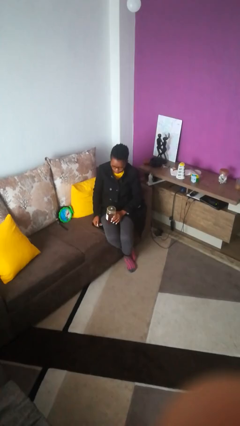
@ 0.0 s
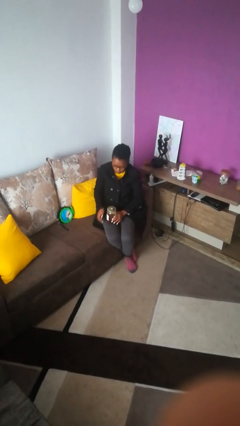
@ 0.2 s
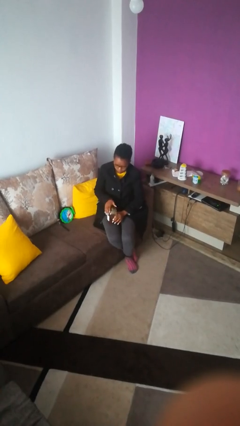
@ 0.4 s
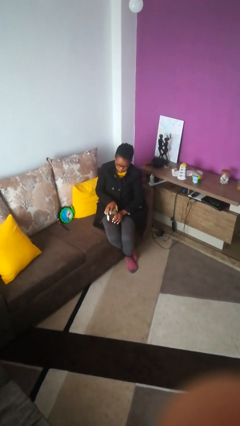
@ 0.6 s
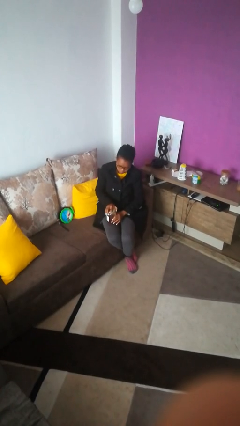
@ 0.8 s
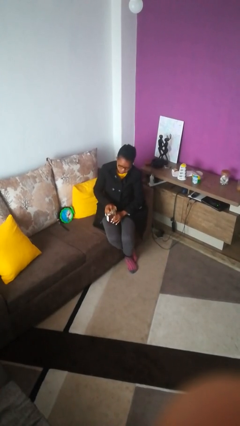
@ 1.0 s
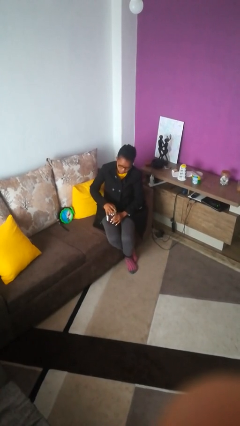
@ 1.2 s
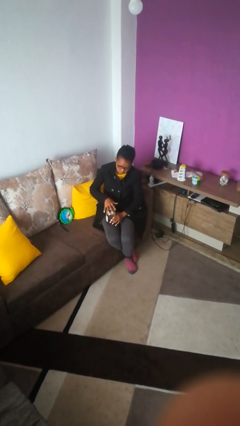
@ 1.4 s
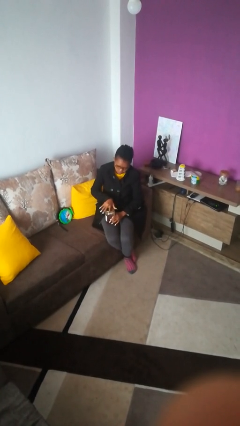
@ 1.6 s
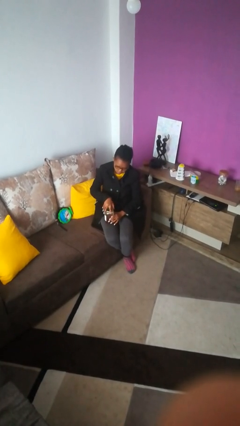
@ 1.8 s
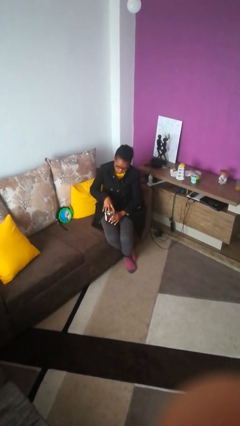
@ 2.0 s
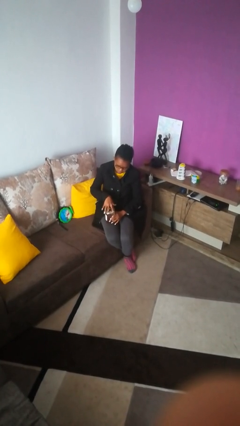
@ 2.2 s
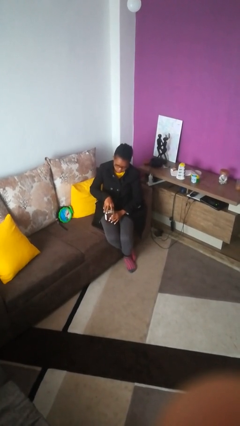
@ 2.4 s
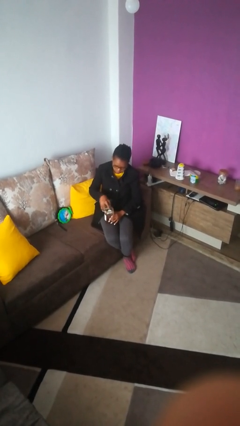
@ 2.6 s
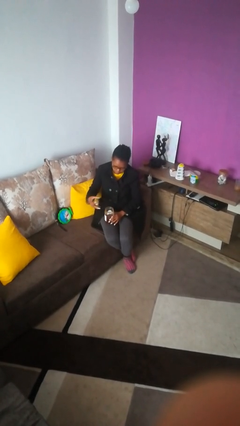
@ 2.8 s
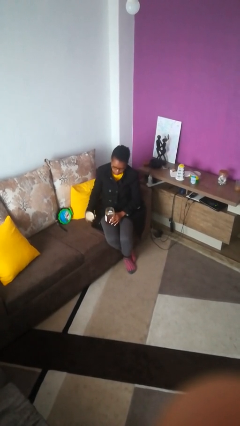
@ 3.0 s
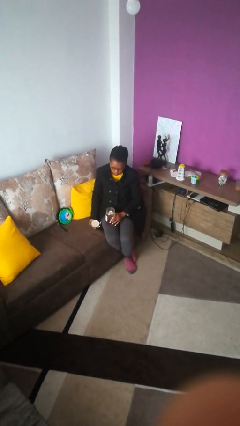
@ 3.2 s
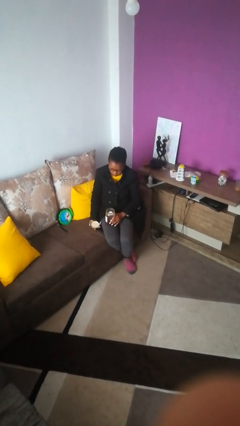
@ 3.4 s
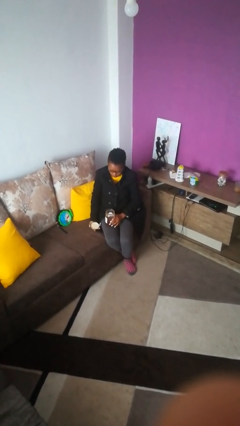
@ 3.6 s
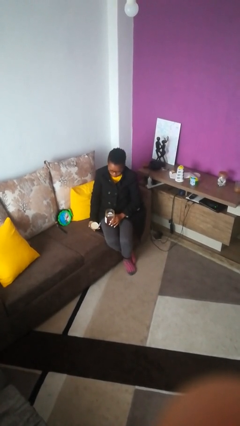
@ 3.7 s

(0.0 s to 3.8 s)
person opens jar

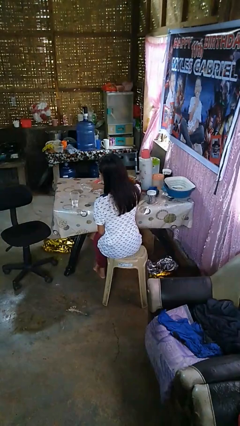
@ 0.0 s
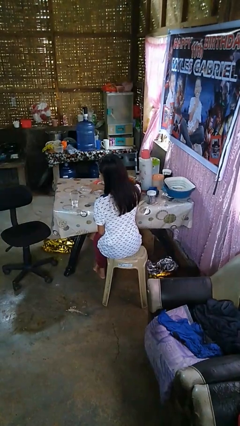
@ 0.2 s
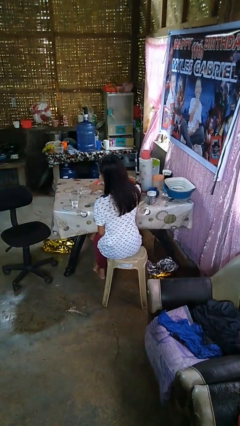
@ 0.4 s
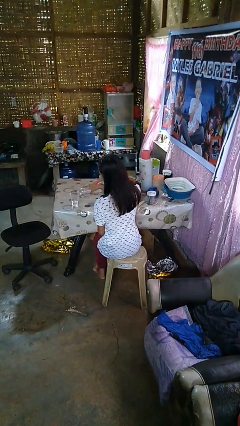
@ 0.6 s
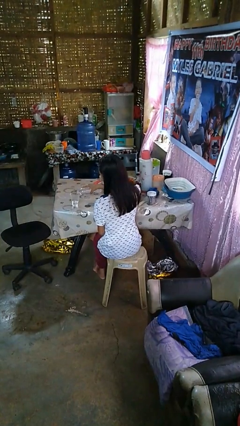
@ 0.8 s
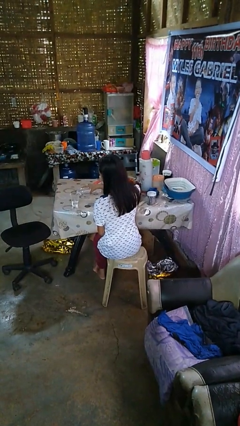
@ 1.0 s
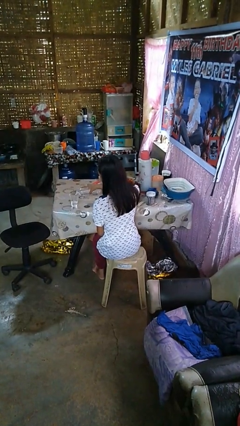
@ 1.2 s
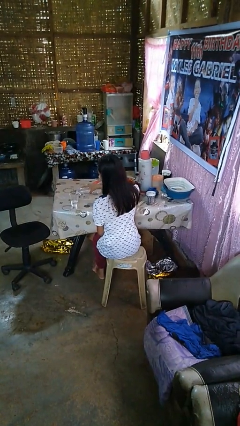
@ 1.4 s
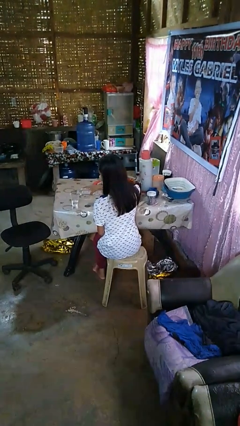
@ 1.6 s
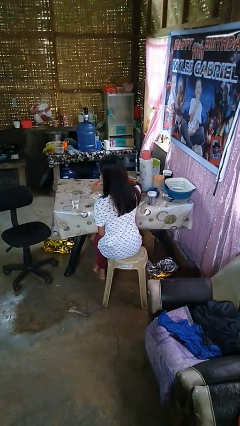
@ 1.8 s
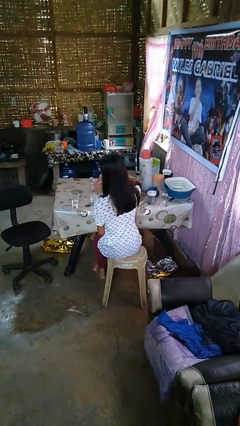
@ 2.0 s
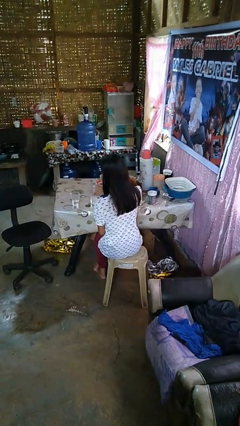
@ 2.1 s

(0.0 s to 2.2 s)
person pours liquid into cup

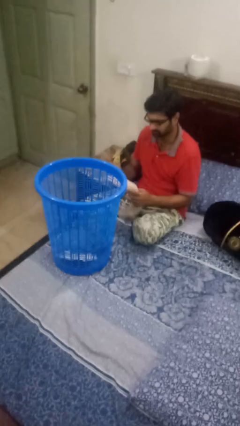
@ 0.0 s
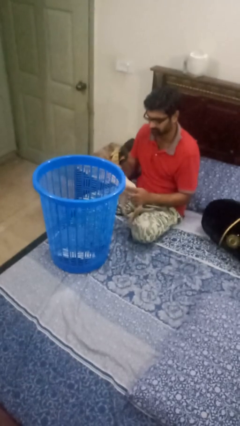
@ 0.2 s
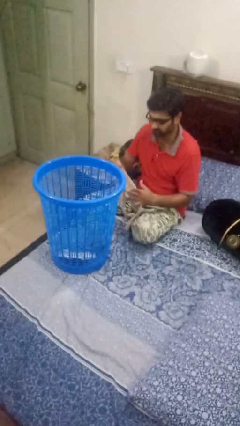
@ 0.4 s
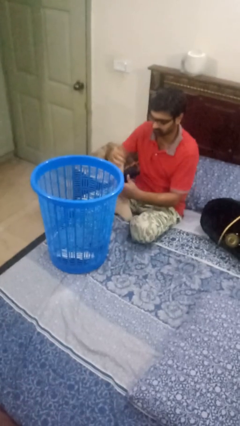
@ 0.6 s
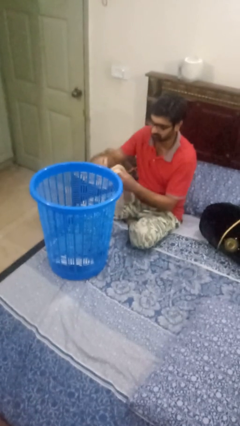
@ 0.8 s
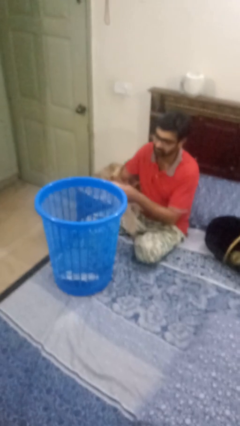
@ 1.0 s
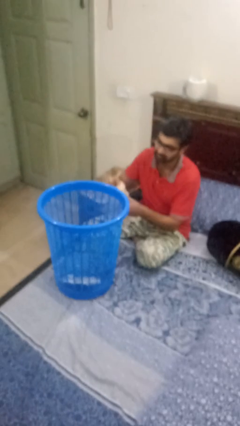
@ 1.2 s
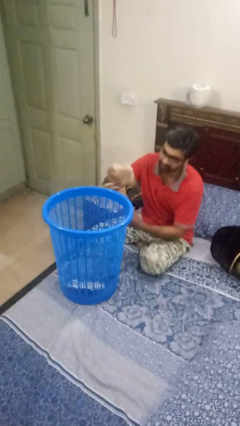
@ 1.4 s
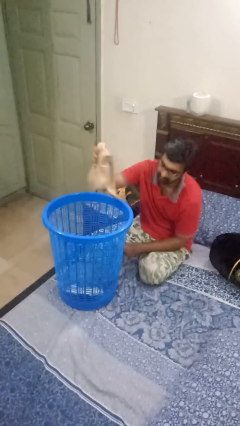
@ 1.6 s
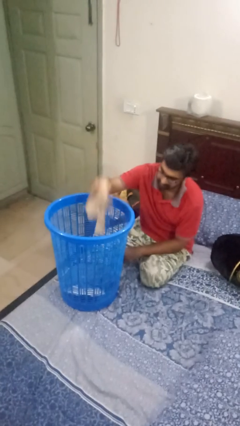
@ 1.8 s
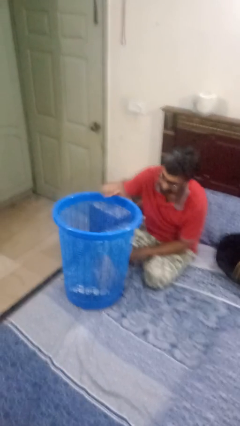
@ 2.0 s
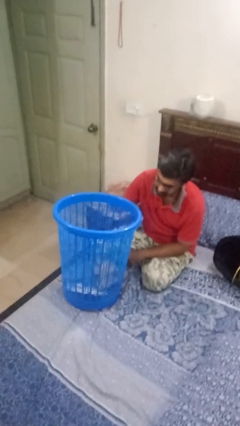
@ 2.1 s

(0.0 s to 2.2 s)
person puts object into basket

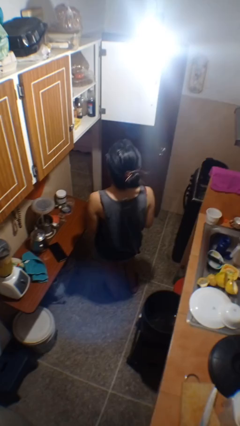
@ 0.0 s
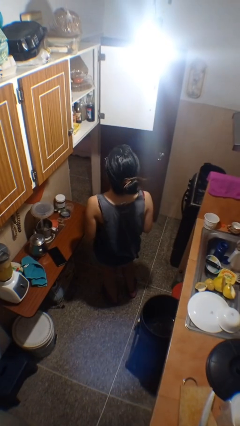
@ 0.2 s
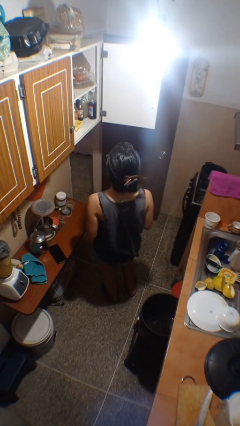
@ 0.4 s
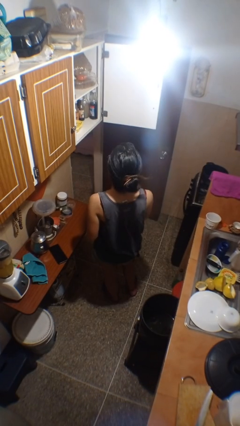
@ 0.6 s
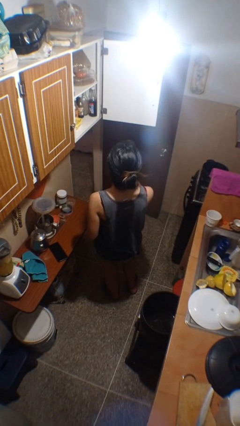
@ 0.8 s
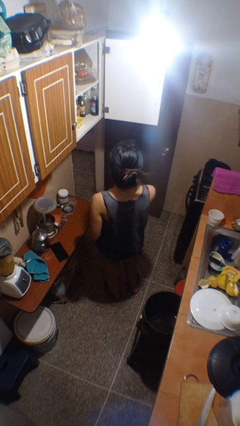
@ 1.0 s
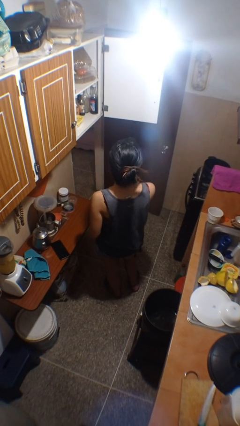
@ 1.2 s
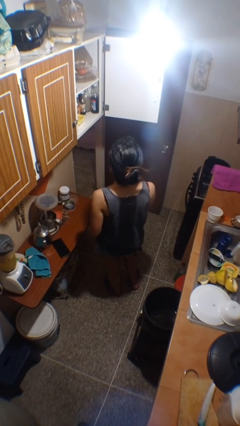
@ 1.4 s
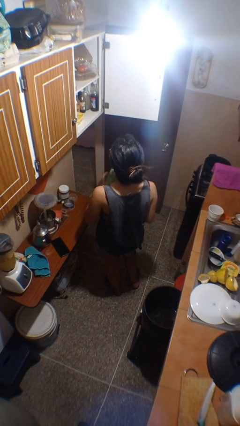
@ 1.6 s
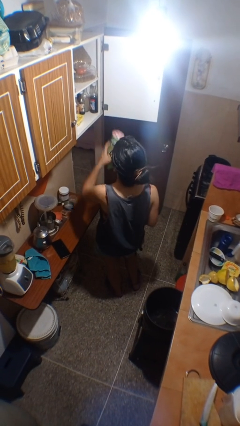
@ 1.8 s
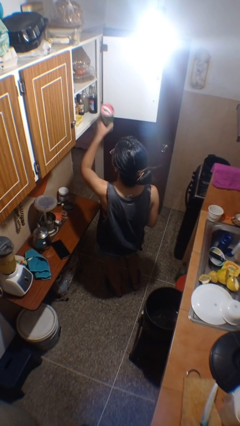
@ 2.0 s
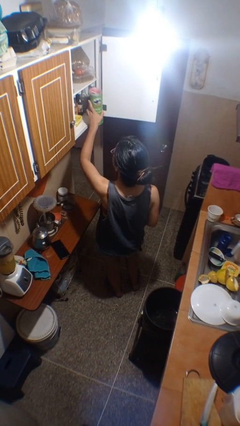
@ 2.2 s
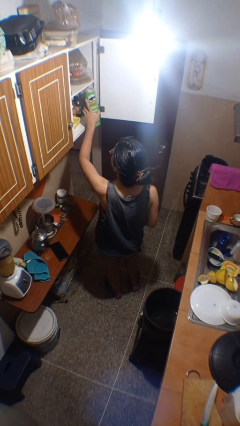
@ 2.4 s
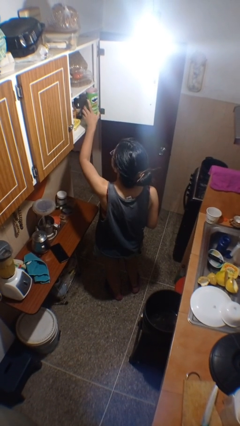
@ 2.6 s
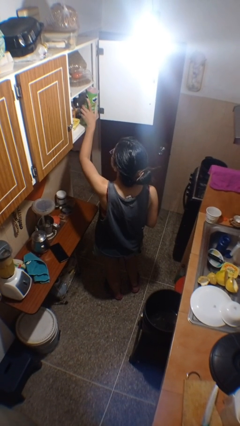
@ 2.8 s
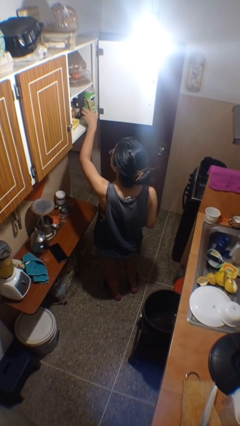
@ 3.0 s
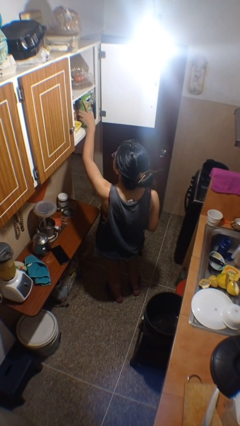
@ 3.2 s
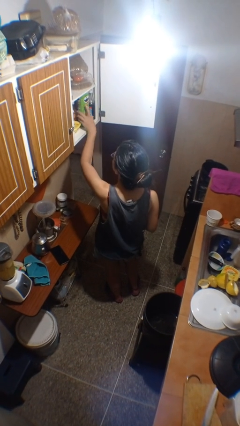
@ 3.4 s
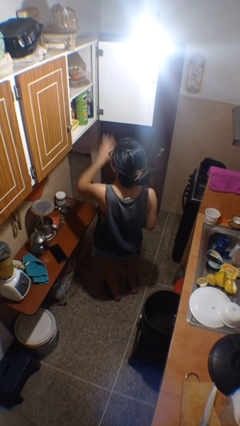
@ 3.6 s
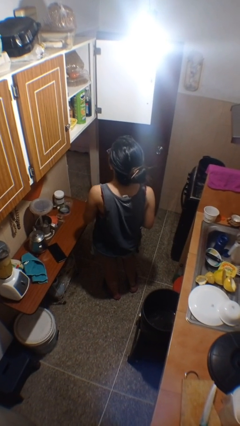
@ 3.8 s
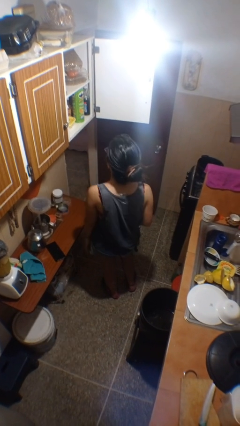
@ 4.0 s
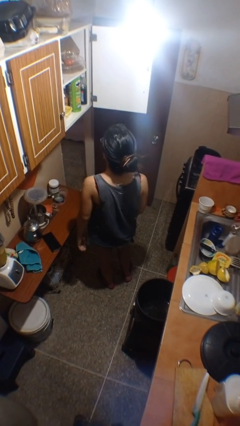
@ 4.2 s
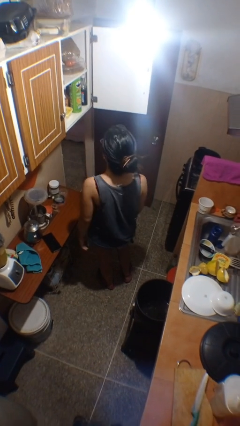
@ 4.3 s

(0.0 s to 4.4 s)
person puts object in cabinet

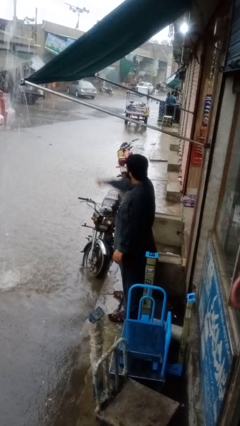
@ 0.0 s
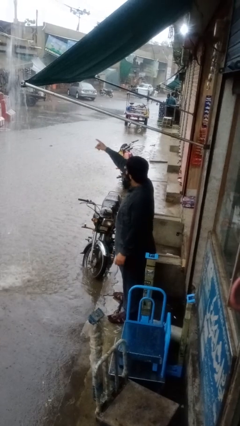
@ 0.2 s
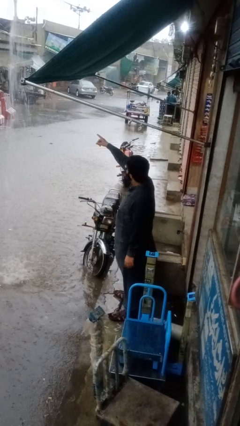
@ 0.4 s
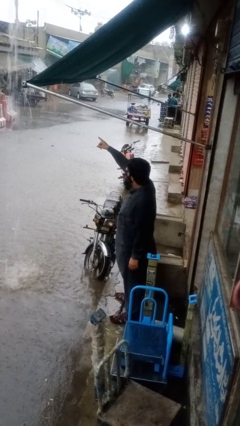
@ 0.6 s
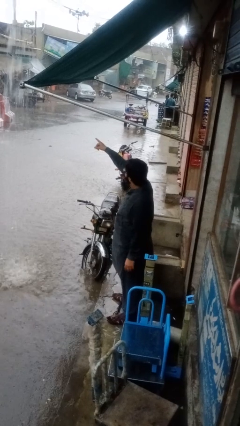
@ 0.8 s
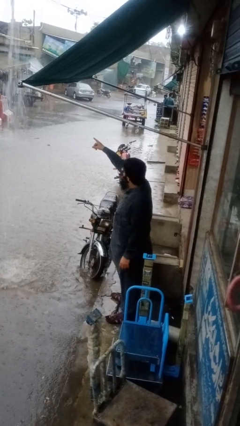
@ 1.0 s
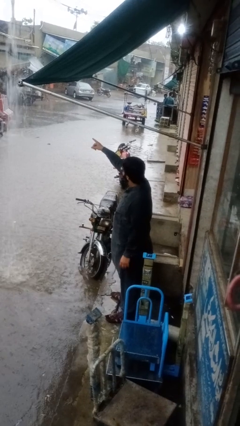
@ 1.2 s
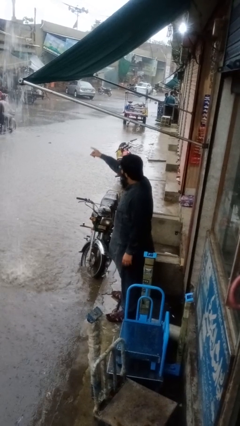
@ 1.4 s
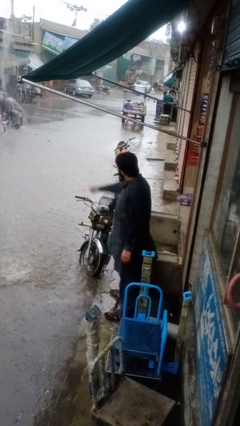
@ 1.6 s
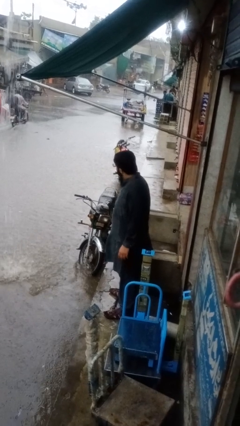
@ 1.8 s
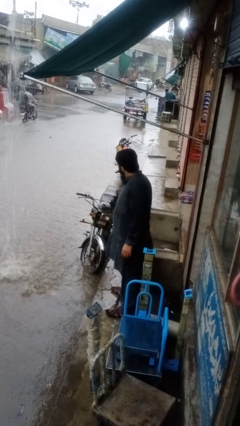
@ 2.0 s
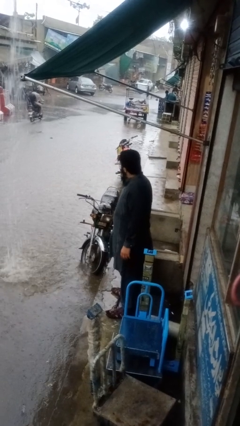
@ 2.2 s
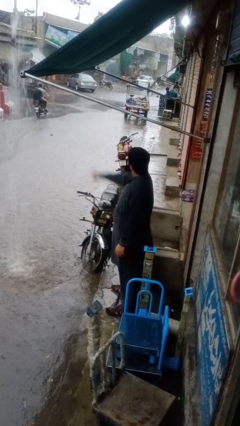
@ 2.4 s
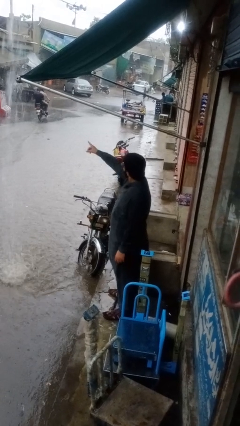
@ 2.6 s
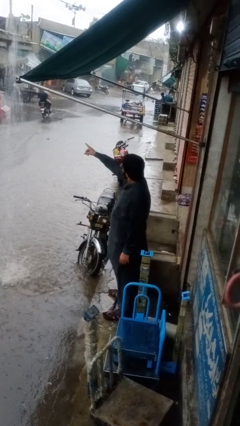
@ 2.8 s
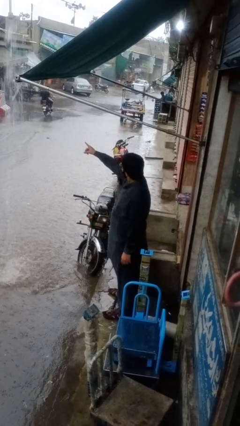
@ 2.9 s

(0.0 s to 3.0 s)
person points at person

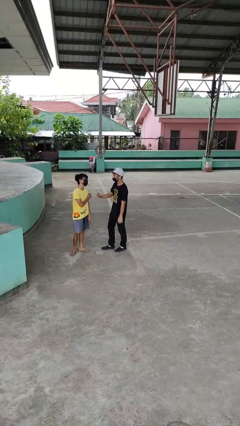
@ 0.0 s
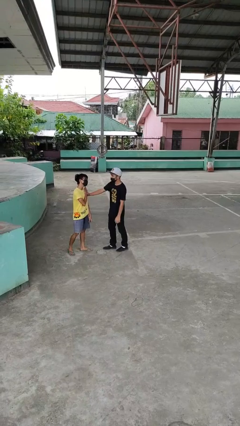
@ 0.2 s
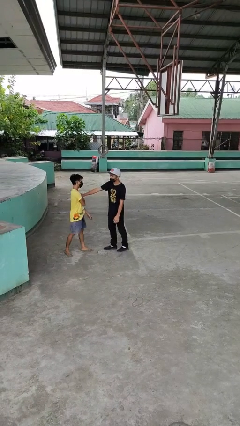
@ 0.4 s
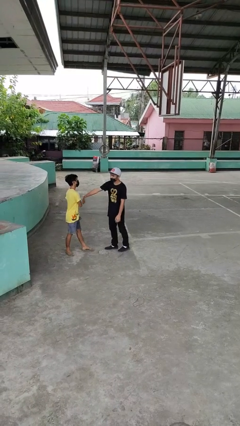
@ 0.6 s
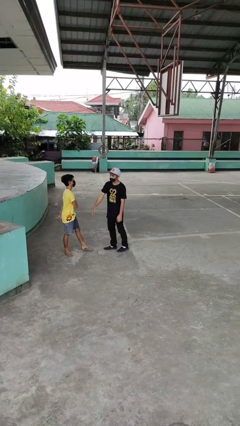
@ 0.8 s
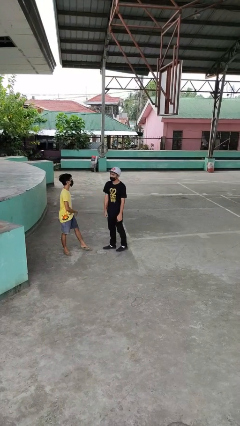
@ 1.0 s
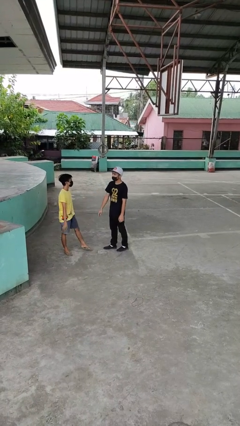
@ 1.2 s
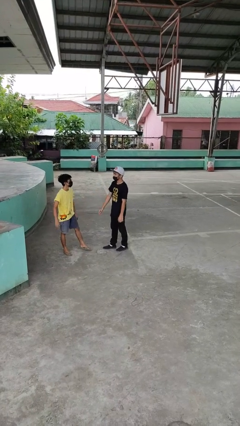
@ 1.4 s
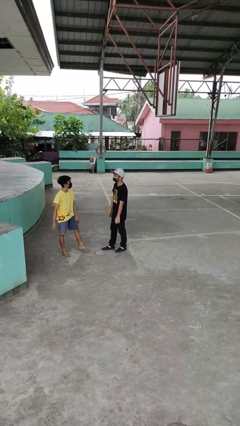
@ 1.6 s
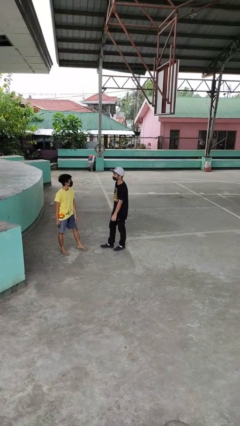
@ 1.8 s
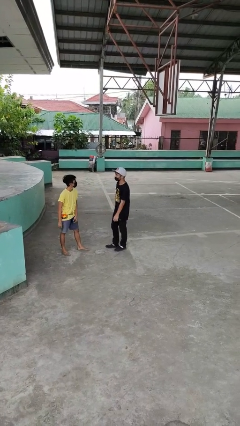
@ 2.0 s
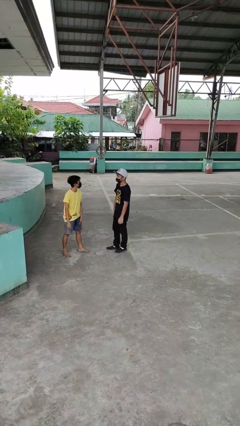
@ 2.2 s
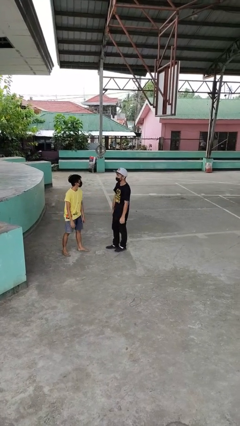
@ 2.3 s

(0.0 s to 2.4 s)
person shoves person
